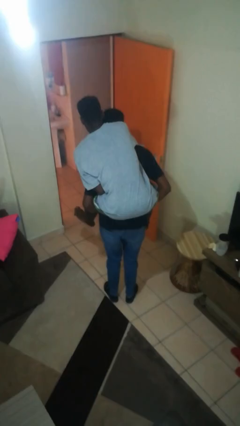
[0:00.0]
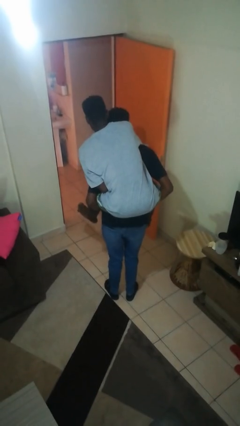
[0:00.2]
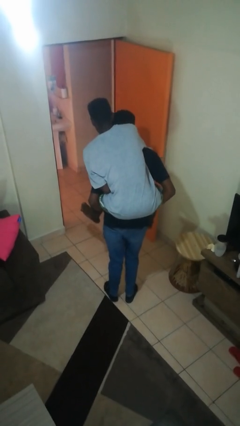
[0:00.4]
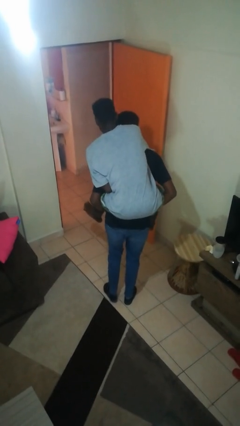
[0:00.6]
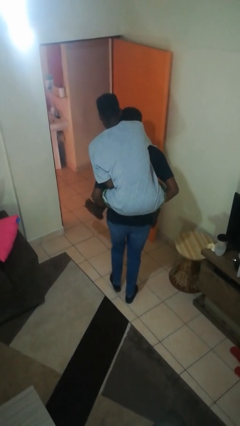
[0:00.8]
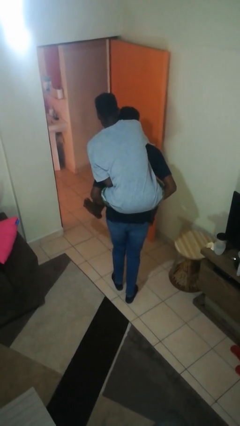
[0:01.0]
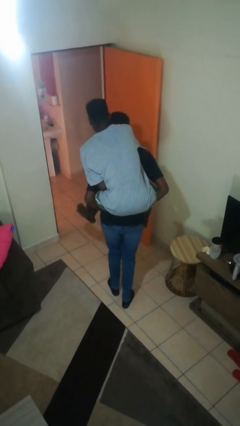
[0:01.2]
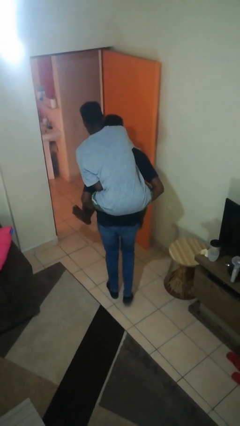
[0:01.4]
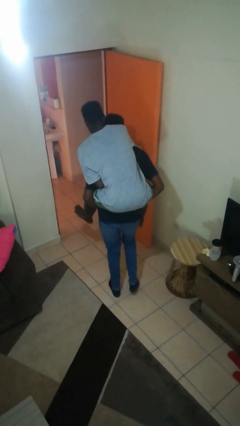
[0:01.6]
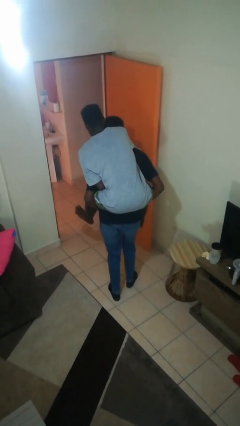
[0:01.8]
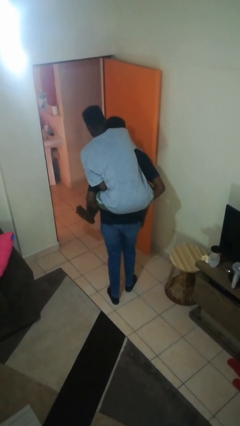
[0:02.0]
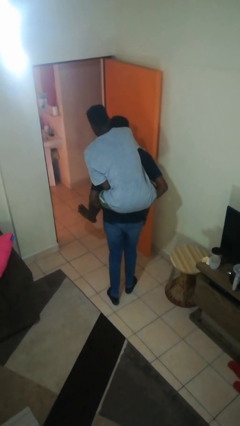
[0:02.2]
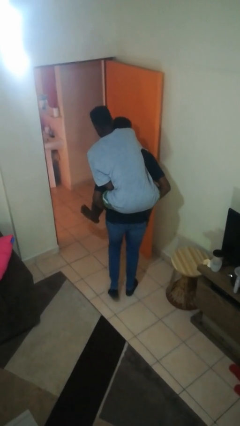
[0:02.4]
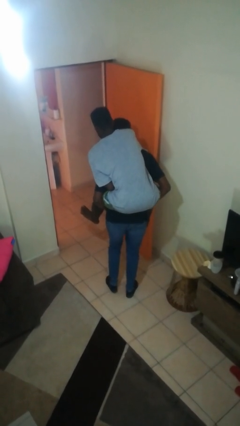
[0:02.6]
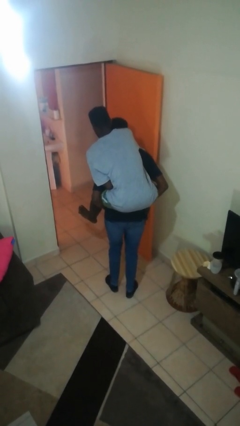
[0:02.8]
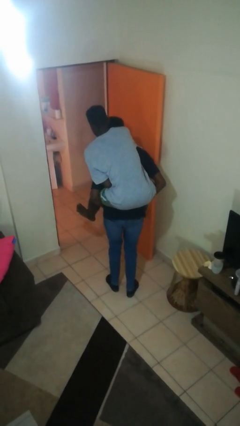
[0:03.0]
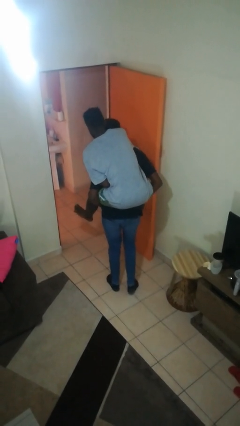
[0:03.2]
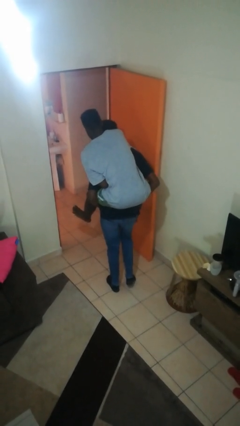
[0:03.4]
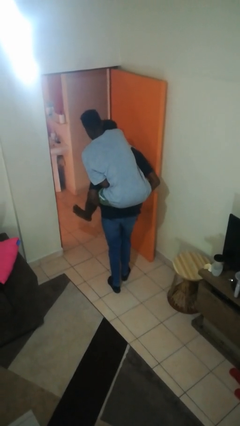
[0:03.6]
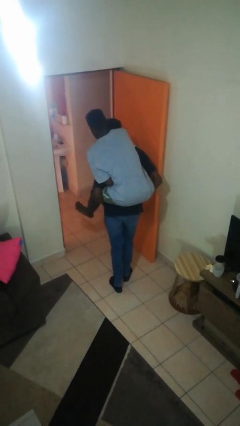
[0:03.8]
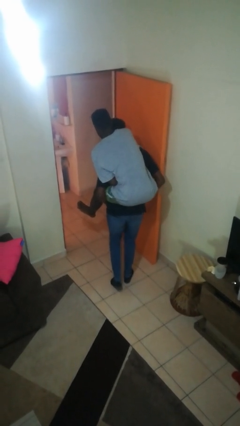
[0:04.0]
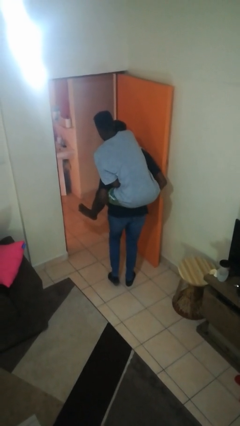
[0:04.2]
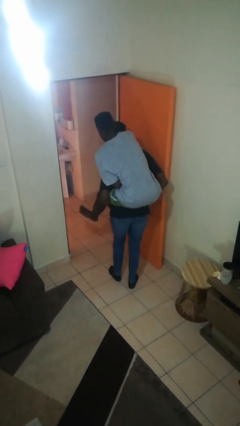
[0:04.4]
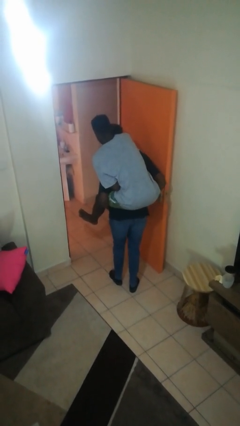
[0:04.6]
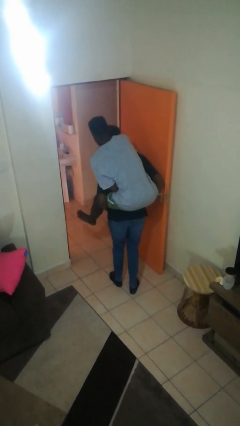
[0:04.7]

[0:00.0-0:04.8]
person carries person on back

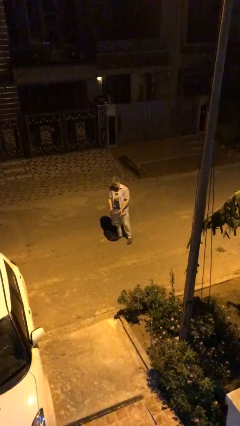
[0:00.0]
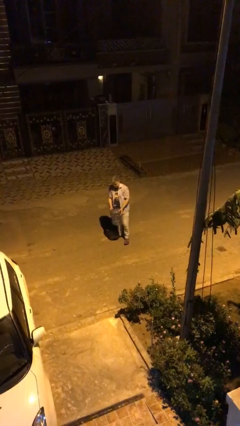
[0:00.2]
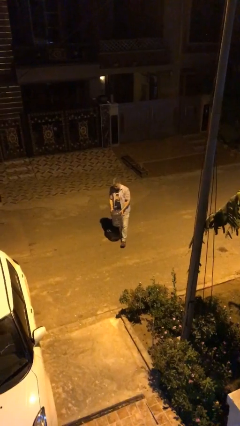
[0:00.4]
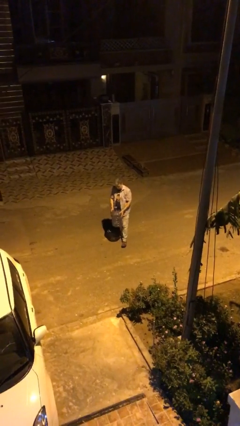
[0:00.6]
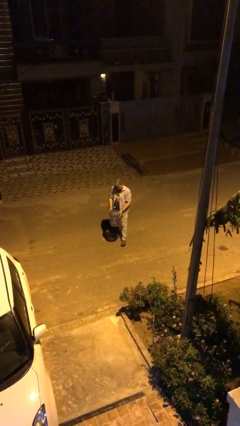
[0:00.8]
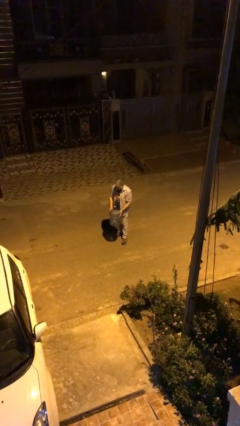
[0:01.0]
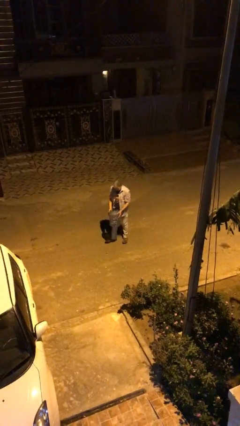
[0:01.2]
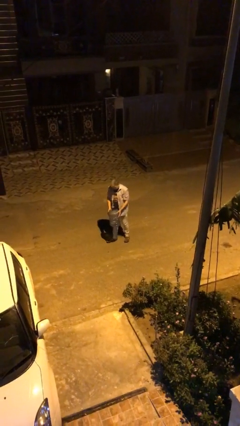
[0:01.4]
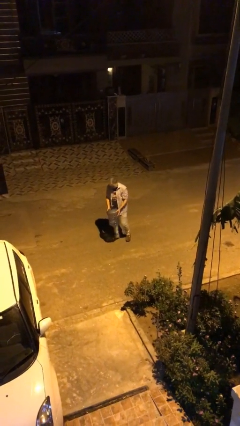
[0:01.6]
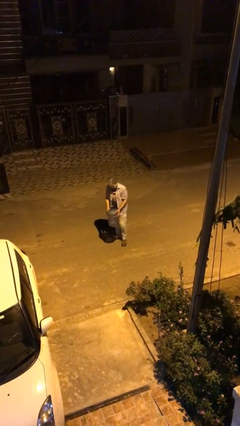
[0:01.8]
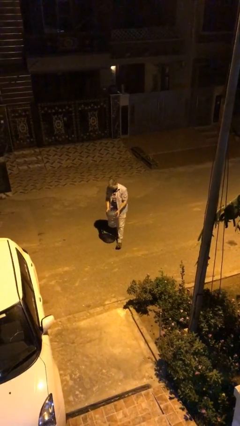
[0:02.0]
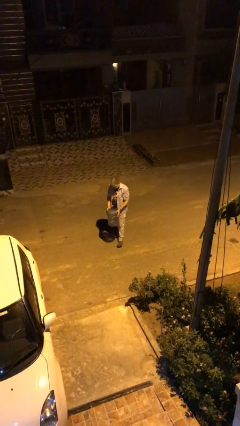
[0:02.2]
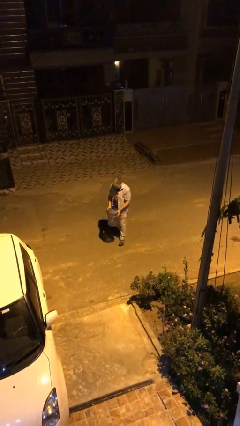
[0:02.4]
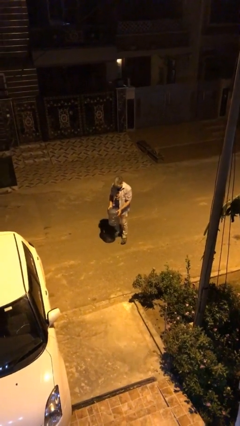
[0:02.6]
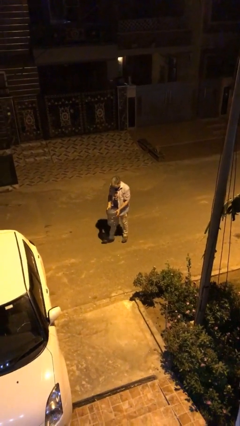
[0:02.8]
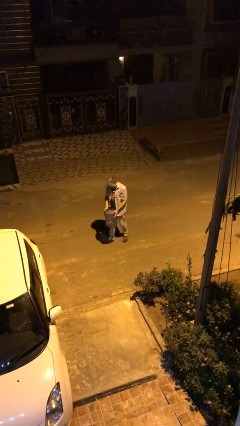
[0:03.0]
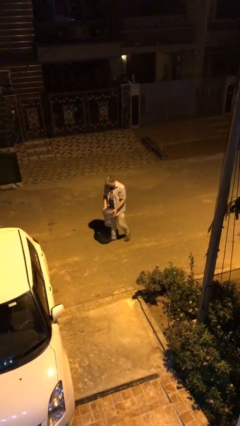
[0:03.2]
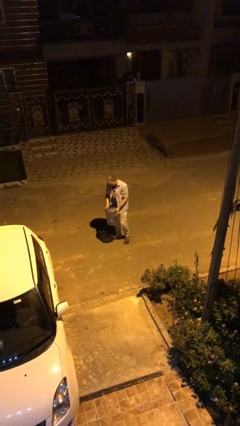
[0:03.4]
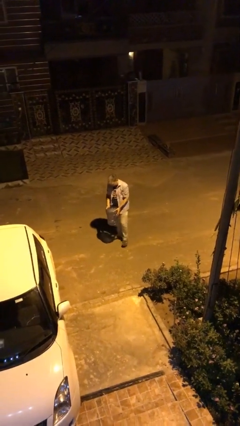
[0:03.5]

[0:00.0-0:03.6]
person carries heavy object

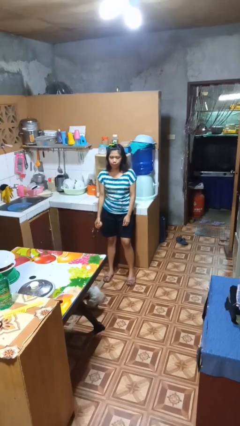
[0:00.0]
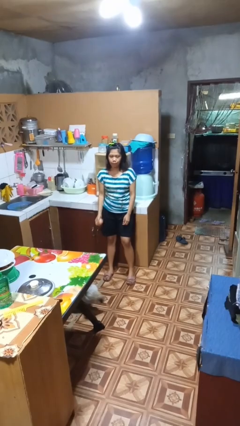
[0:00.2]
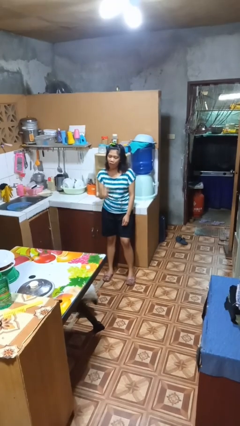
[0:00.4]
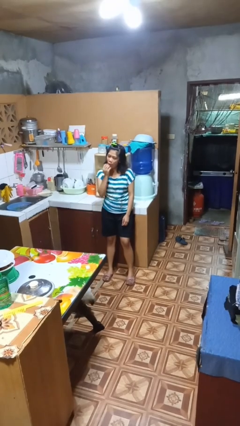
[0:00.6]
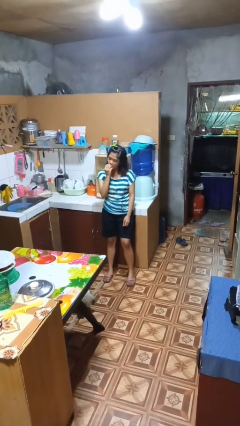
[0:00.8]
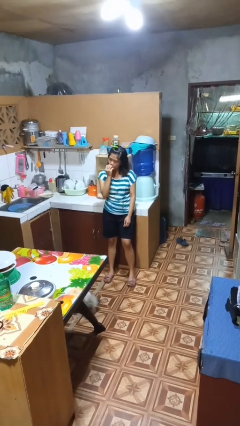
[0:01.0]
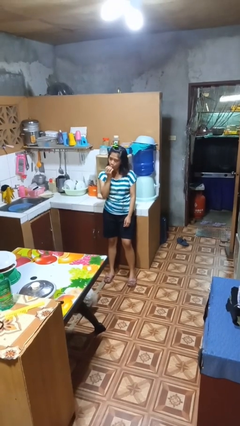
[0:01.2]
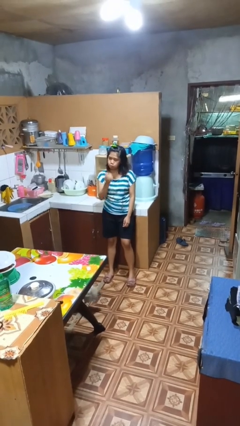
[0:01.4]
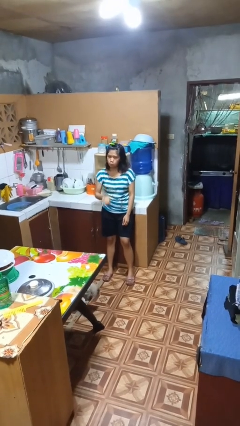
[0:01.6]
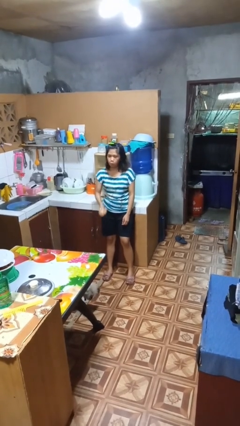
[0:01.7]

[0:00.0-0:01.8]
person eats apple

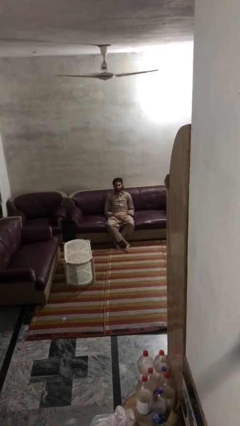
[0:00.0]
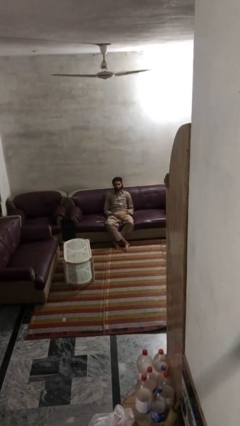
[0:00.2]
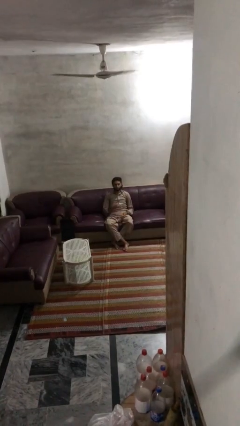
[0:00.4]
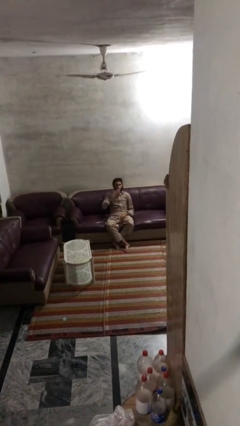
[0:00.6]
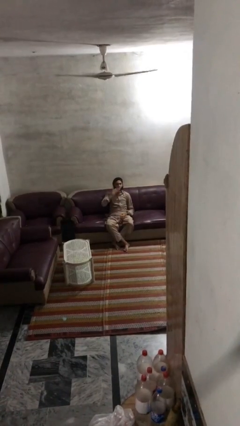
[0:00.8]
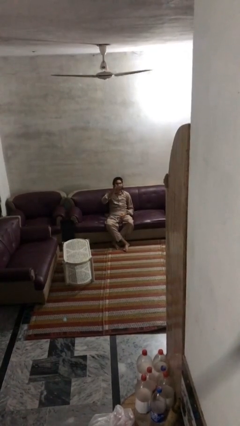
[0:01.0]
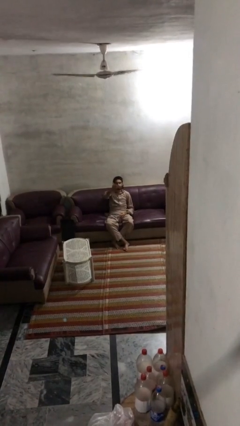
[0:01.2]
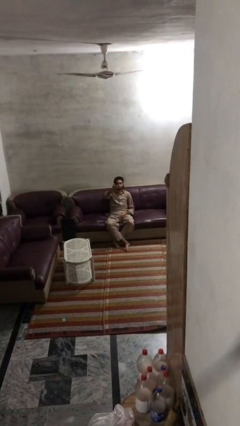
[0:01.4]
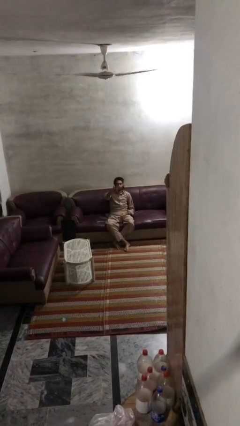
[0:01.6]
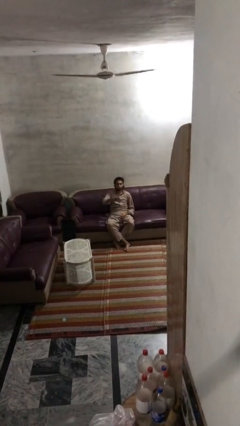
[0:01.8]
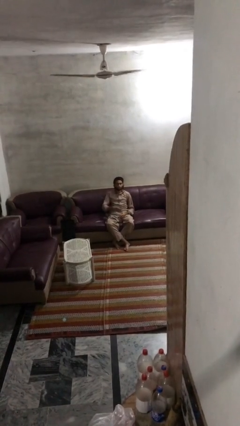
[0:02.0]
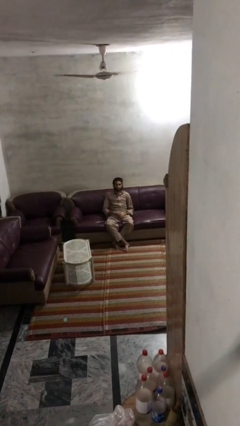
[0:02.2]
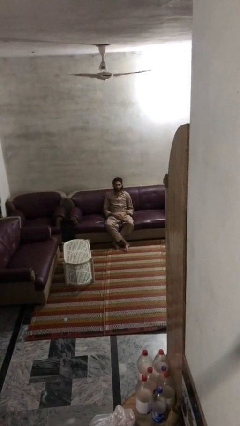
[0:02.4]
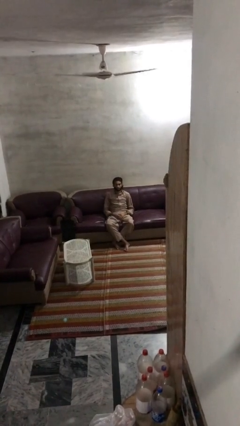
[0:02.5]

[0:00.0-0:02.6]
person gestures blow kiss

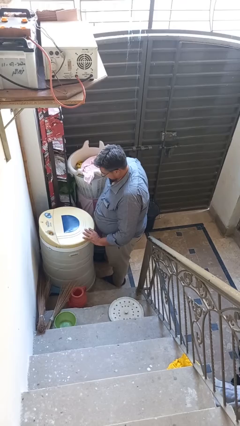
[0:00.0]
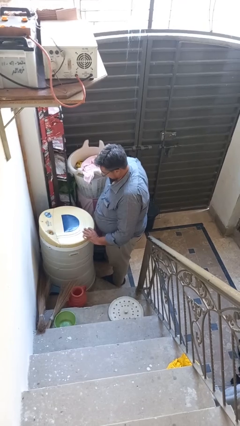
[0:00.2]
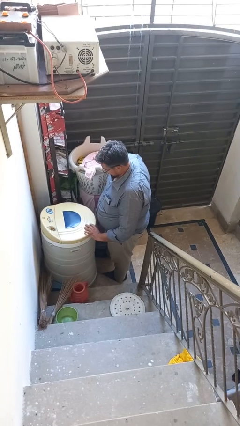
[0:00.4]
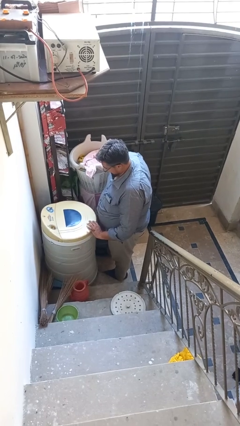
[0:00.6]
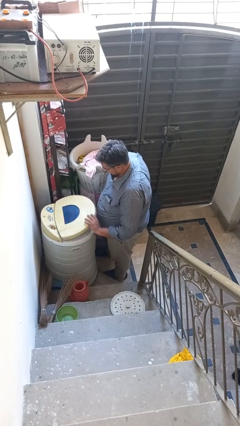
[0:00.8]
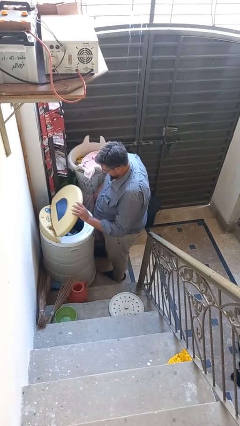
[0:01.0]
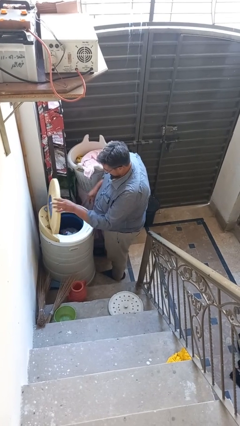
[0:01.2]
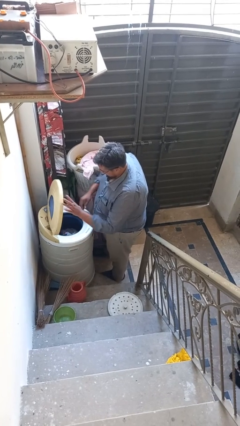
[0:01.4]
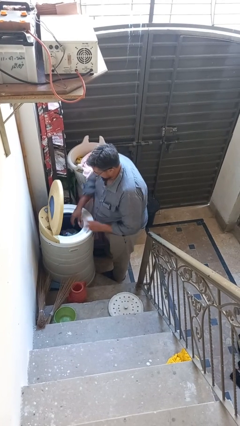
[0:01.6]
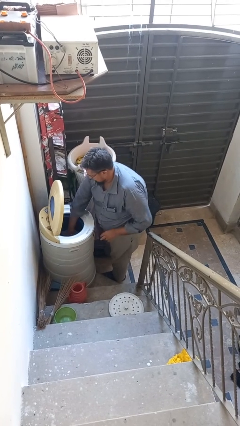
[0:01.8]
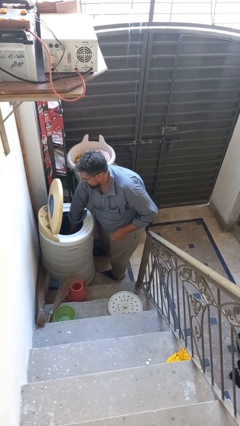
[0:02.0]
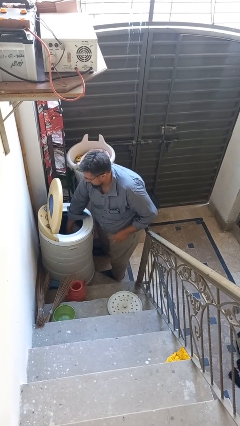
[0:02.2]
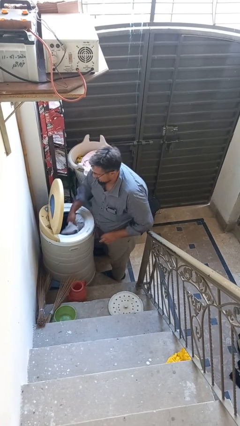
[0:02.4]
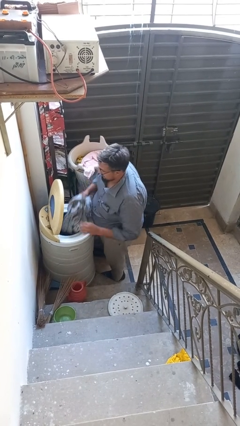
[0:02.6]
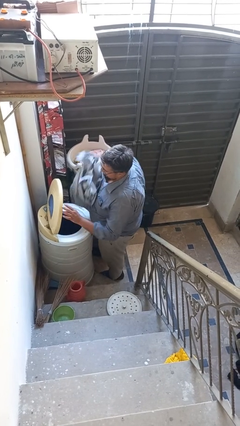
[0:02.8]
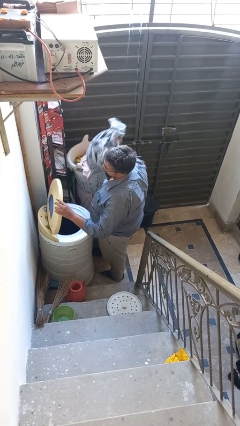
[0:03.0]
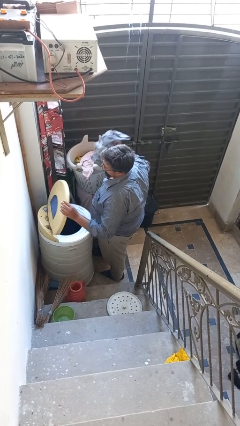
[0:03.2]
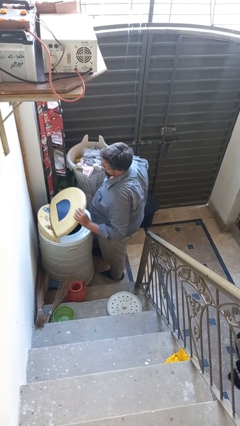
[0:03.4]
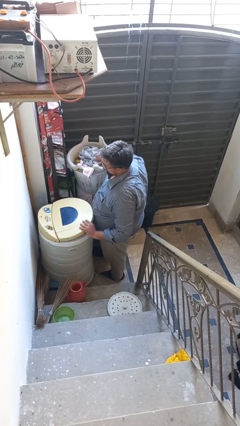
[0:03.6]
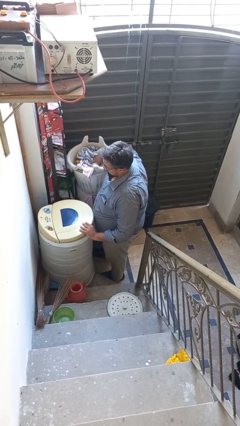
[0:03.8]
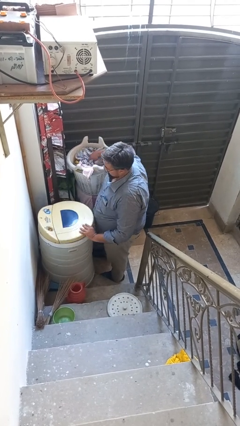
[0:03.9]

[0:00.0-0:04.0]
person unloads clotheswasher

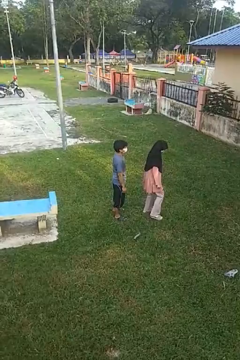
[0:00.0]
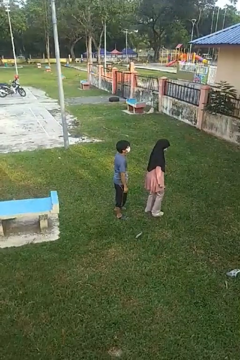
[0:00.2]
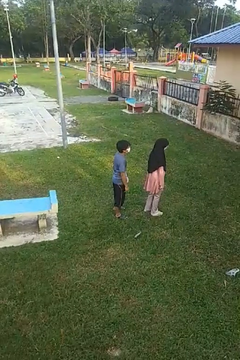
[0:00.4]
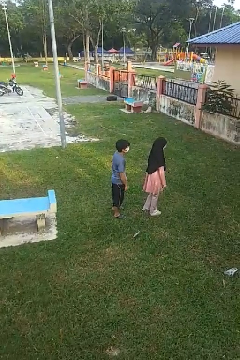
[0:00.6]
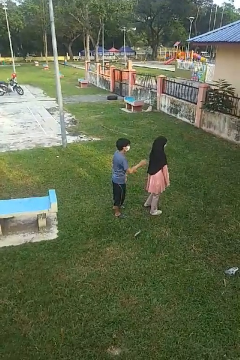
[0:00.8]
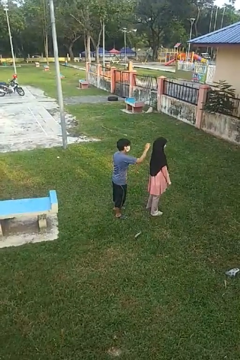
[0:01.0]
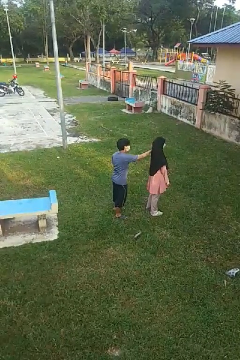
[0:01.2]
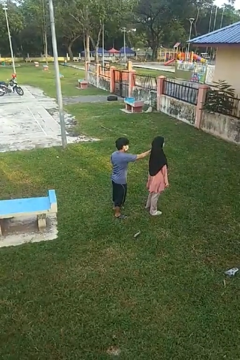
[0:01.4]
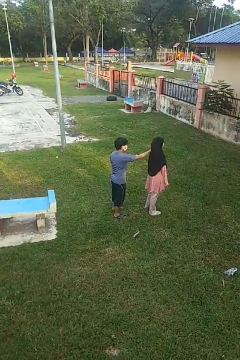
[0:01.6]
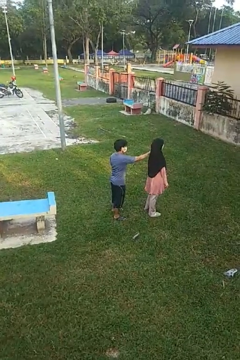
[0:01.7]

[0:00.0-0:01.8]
person grabs person by shoulder
